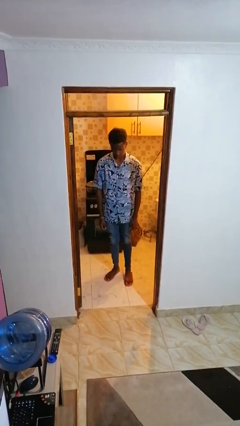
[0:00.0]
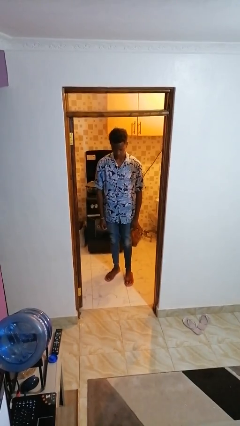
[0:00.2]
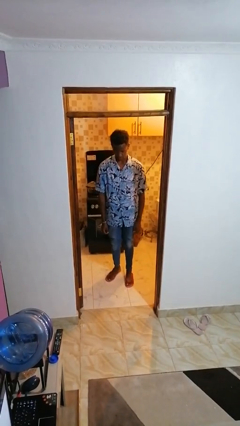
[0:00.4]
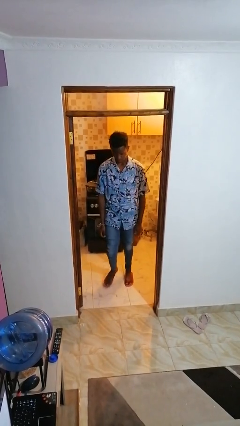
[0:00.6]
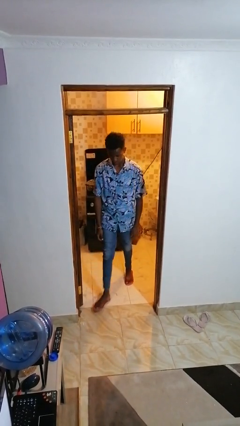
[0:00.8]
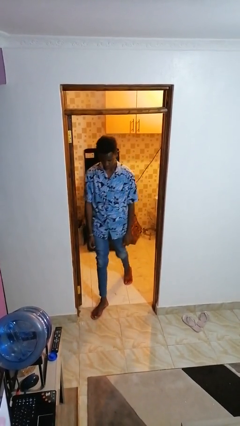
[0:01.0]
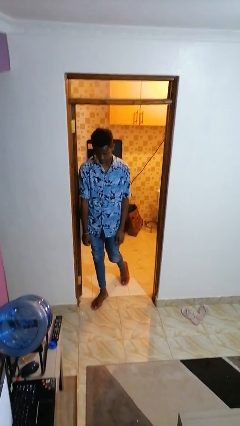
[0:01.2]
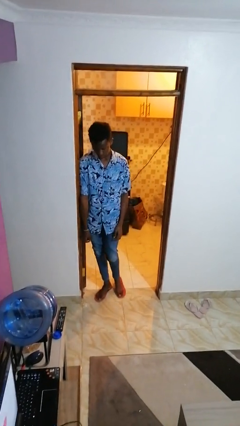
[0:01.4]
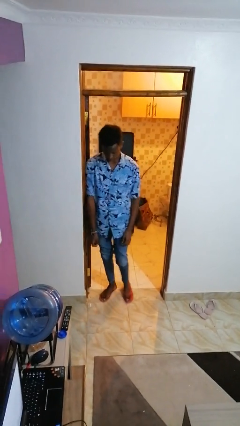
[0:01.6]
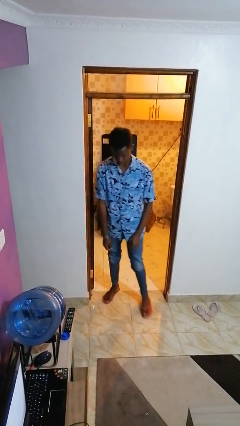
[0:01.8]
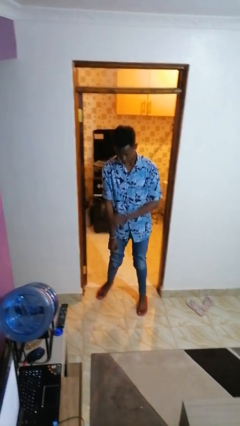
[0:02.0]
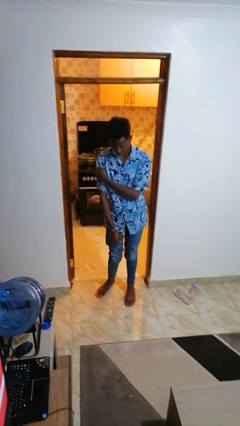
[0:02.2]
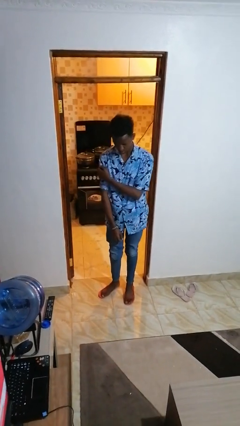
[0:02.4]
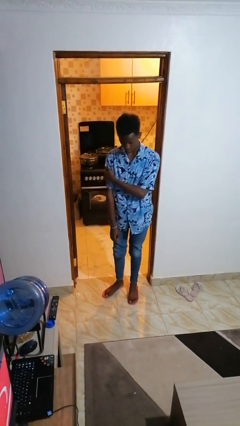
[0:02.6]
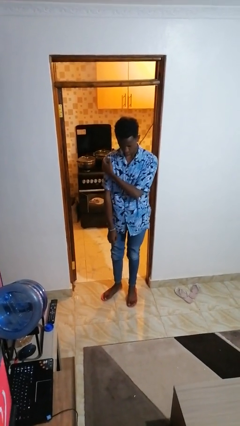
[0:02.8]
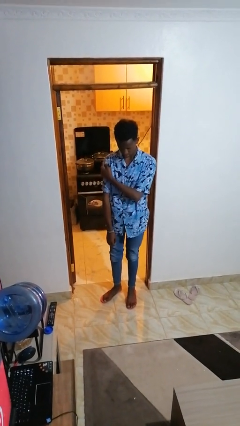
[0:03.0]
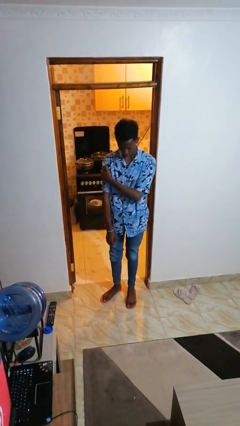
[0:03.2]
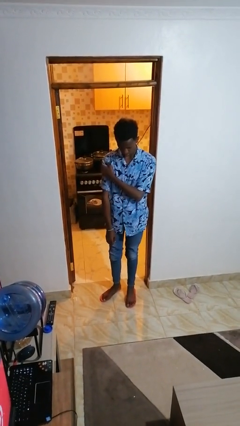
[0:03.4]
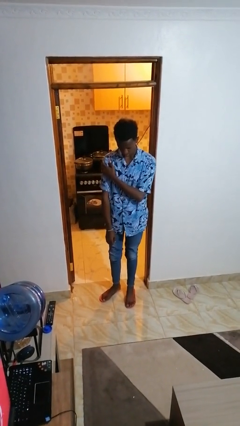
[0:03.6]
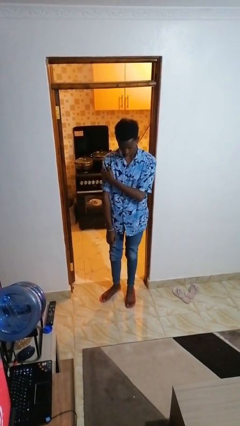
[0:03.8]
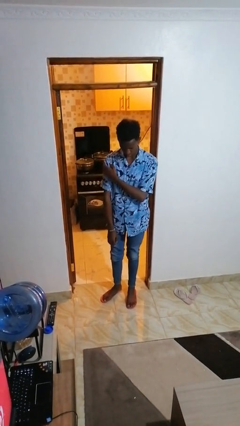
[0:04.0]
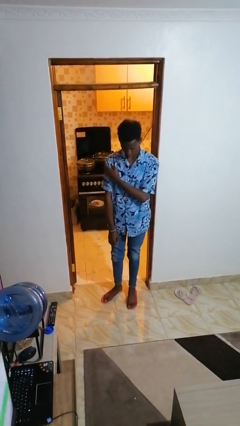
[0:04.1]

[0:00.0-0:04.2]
person bumps into wall

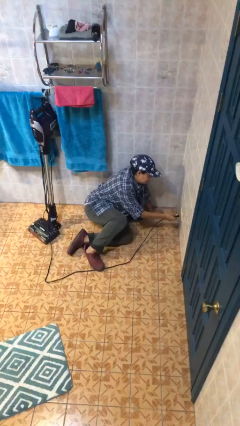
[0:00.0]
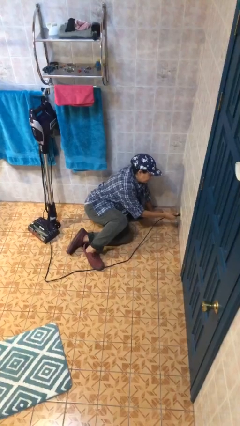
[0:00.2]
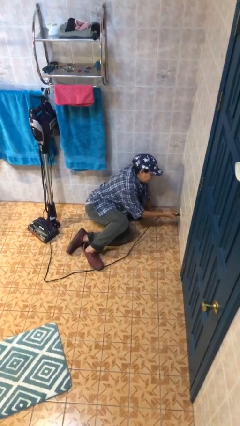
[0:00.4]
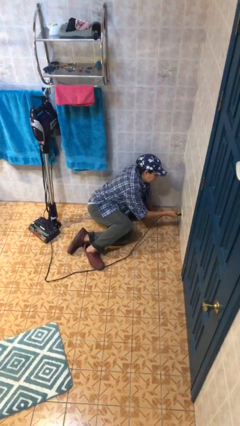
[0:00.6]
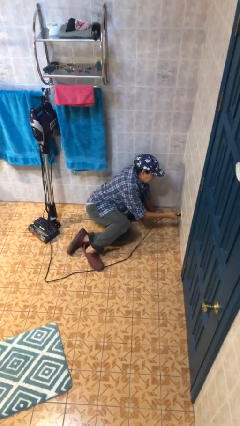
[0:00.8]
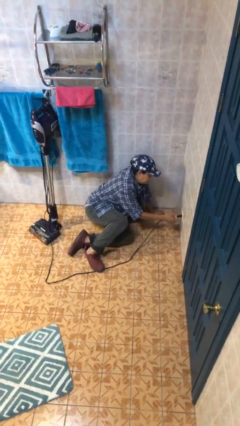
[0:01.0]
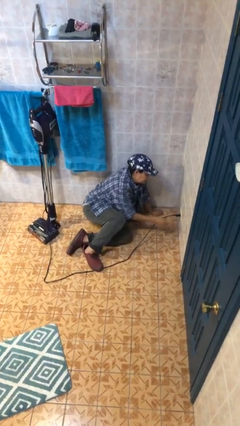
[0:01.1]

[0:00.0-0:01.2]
person plugs into electrical socket

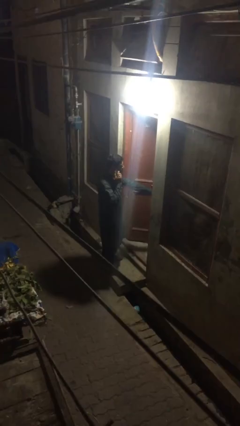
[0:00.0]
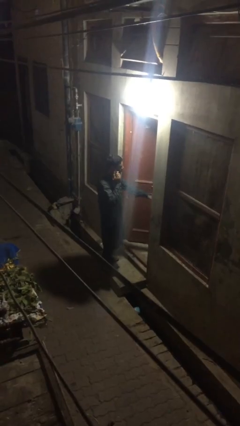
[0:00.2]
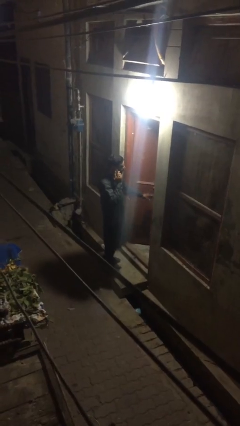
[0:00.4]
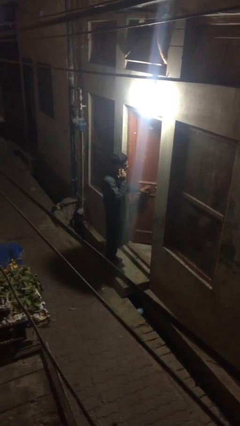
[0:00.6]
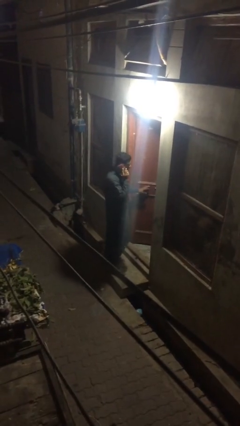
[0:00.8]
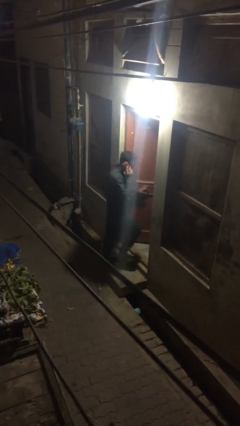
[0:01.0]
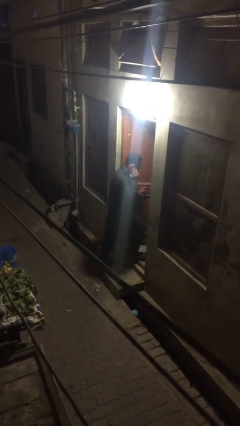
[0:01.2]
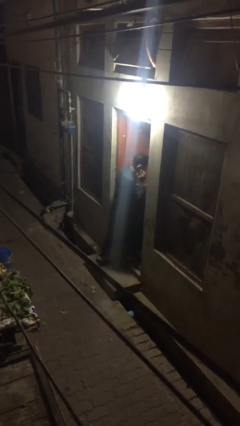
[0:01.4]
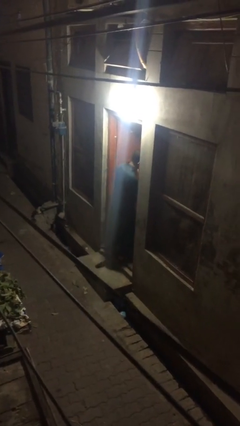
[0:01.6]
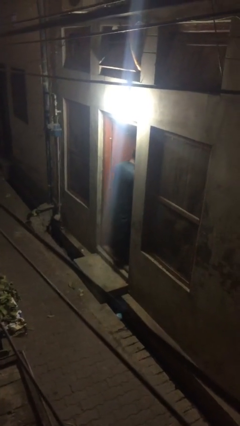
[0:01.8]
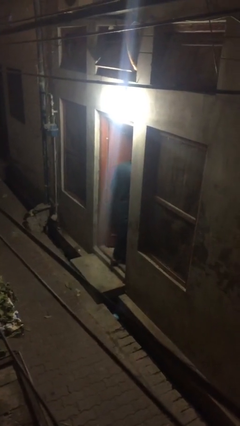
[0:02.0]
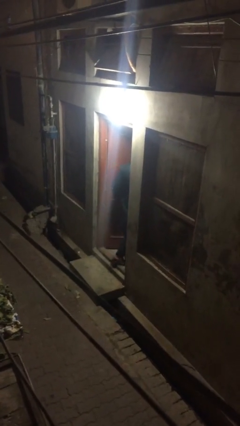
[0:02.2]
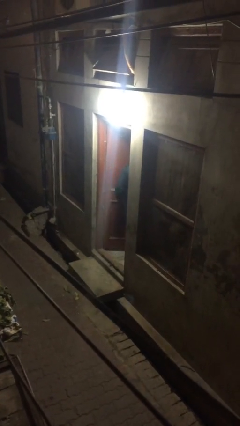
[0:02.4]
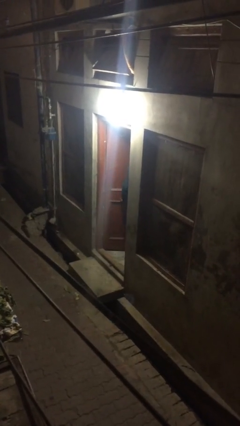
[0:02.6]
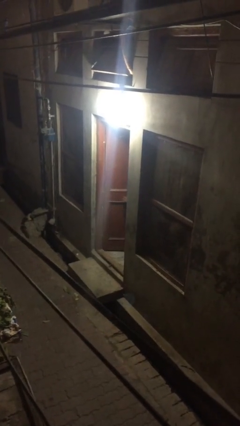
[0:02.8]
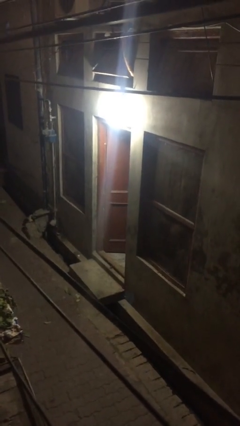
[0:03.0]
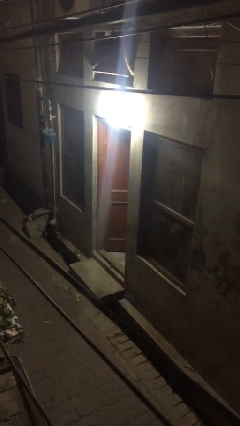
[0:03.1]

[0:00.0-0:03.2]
person exits scene through structure

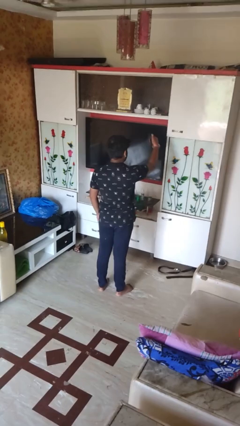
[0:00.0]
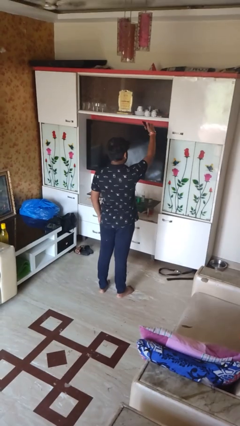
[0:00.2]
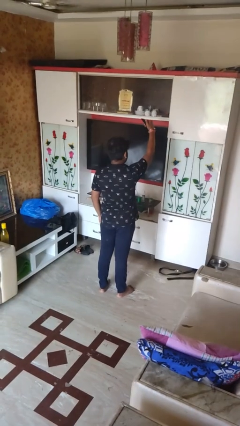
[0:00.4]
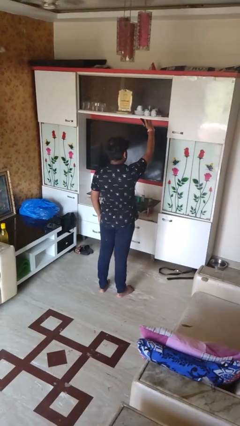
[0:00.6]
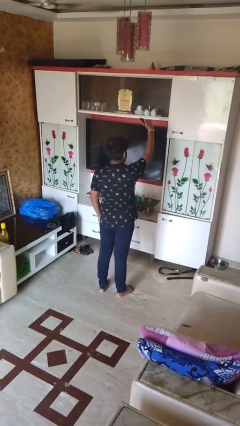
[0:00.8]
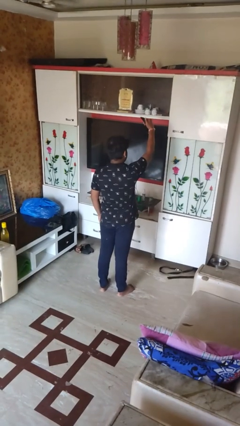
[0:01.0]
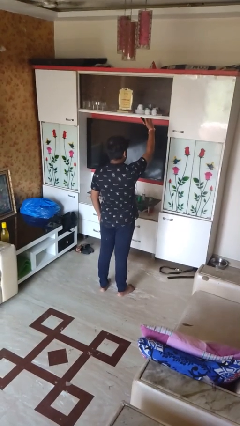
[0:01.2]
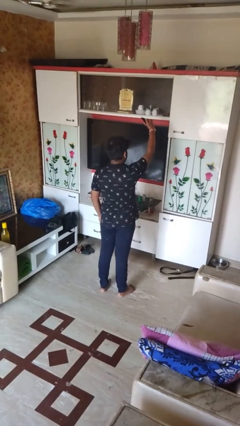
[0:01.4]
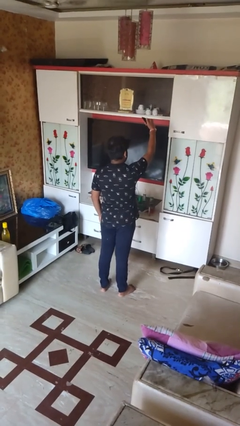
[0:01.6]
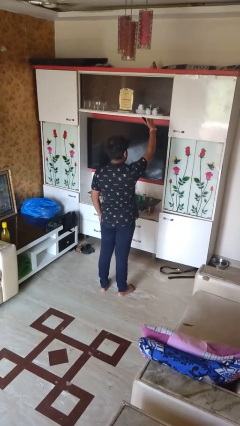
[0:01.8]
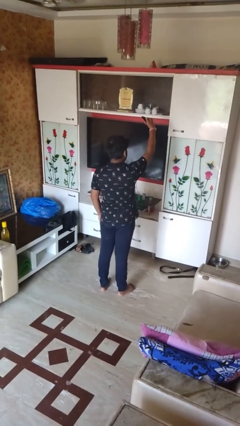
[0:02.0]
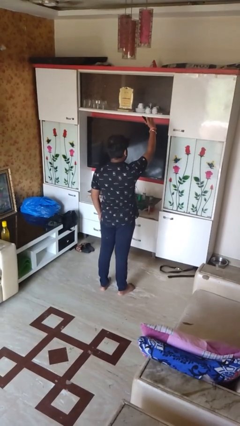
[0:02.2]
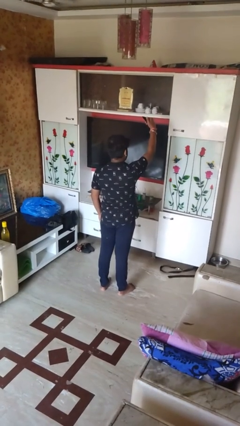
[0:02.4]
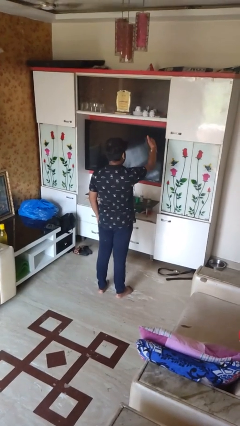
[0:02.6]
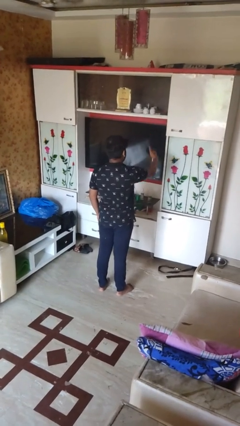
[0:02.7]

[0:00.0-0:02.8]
person takes selfie

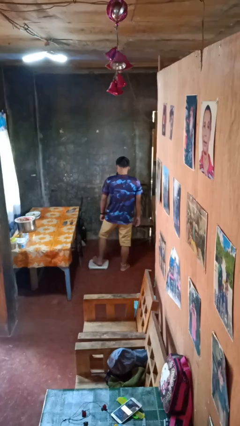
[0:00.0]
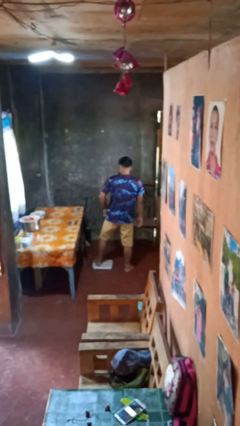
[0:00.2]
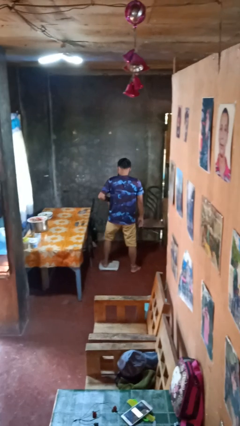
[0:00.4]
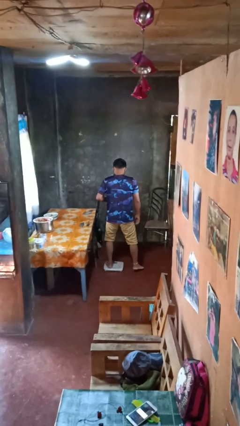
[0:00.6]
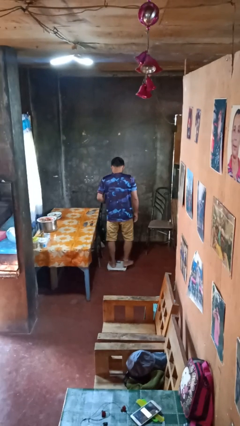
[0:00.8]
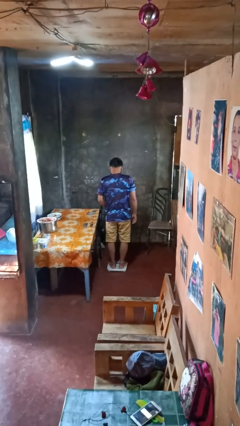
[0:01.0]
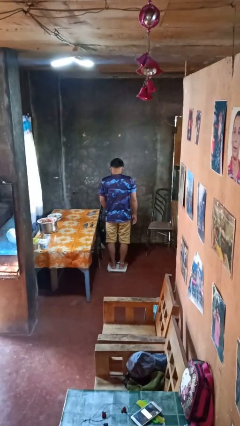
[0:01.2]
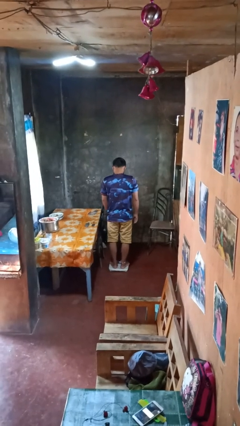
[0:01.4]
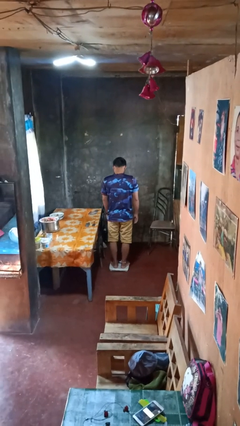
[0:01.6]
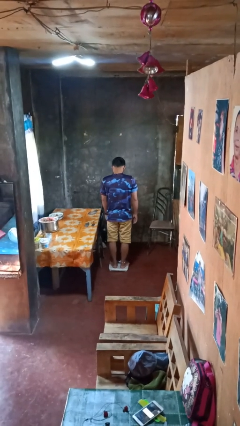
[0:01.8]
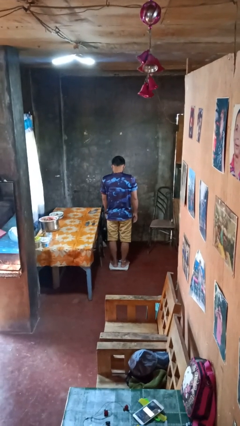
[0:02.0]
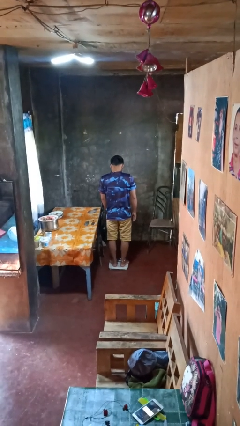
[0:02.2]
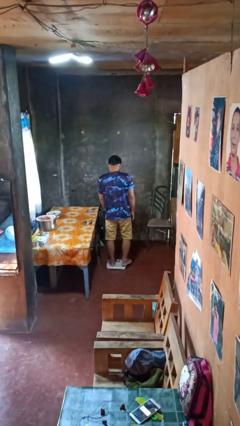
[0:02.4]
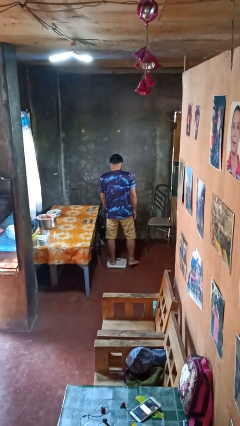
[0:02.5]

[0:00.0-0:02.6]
person uses bodyweight scale

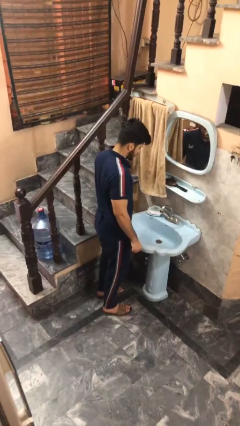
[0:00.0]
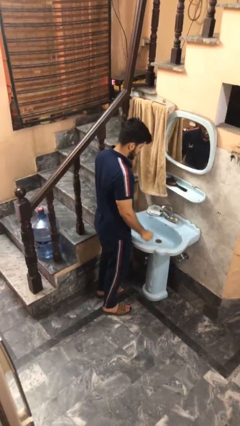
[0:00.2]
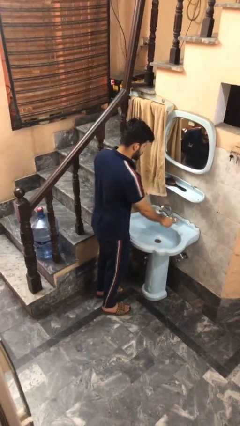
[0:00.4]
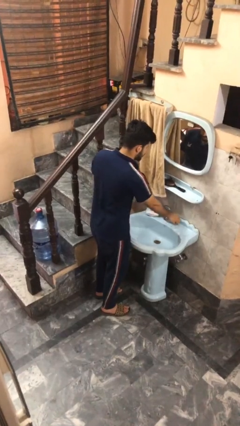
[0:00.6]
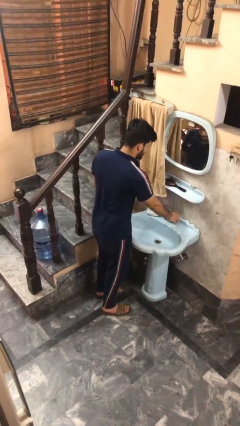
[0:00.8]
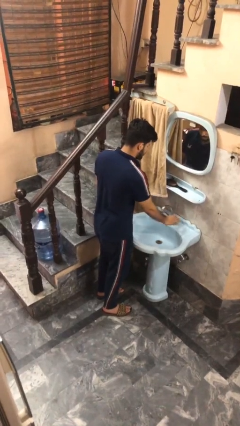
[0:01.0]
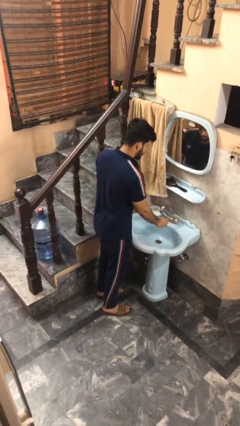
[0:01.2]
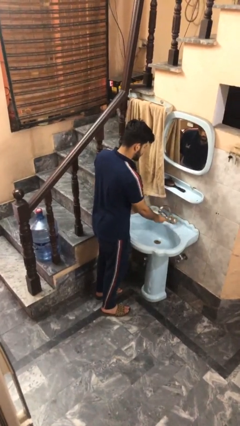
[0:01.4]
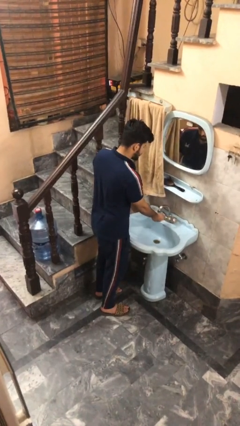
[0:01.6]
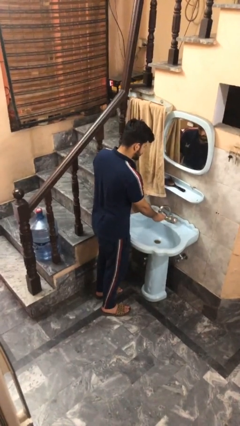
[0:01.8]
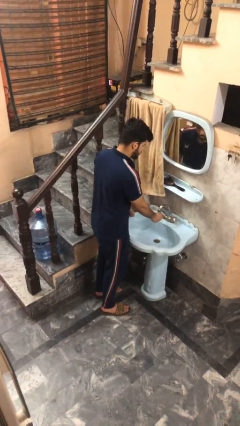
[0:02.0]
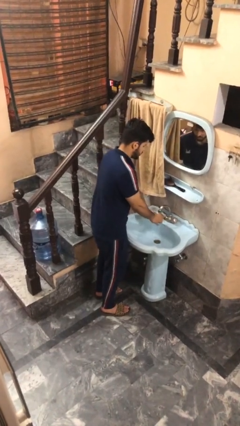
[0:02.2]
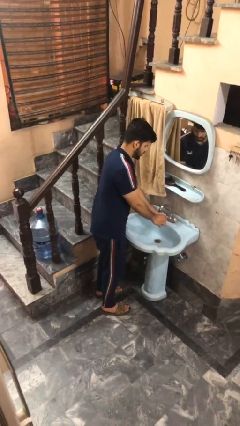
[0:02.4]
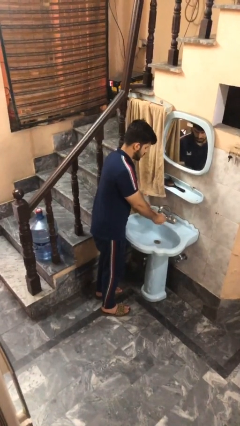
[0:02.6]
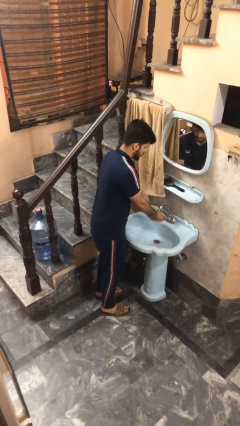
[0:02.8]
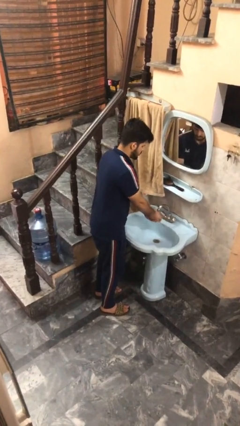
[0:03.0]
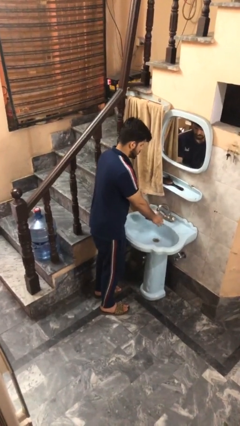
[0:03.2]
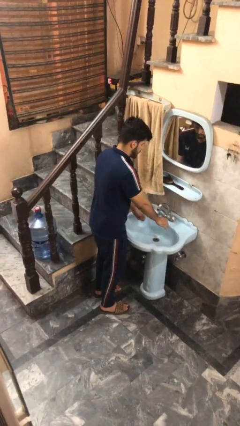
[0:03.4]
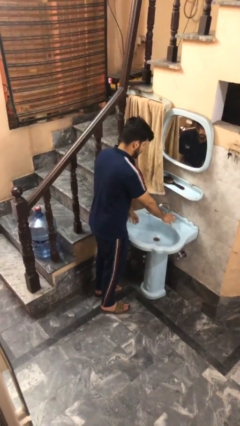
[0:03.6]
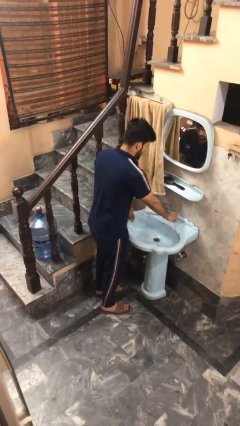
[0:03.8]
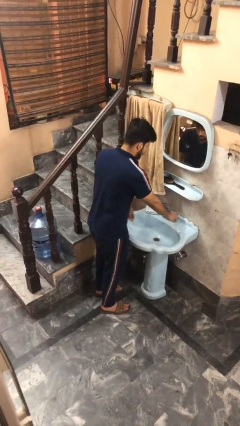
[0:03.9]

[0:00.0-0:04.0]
person washes hands
